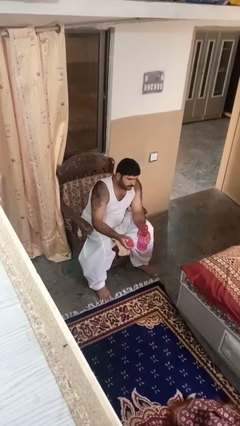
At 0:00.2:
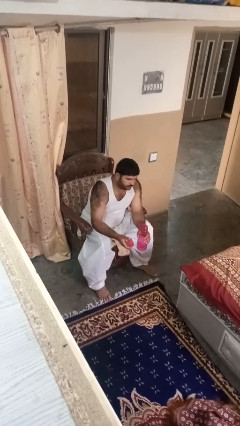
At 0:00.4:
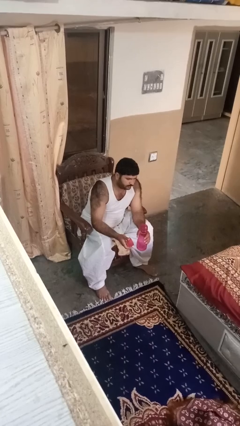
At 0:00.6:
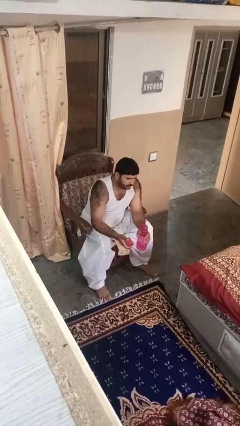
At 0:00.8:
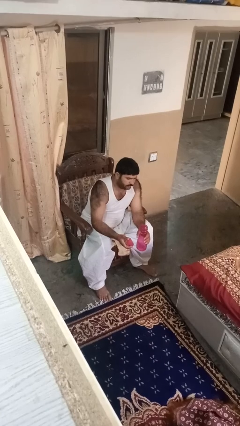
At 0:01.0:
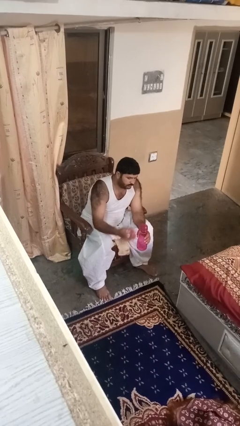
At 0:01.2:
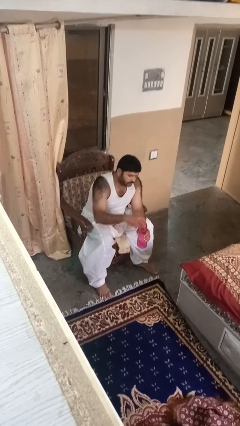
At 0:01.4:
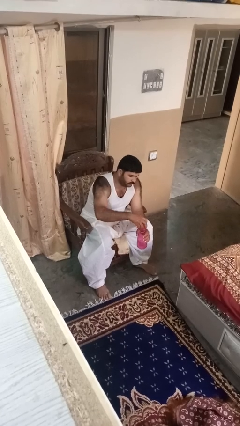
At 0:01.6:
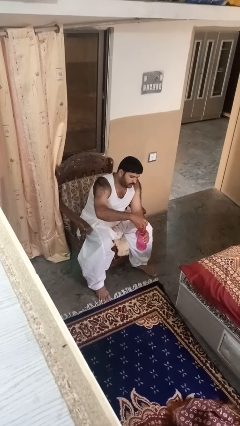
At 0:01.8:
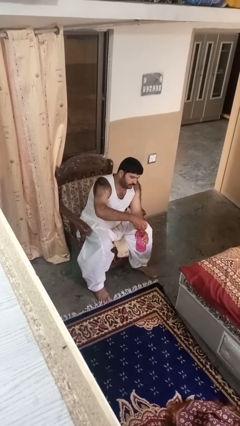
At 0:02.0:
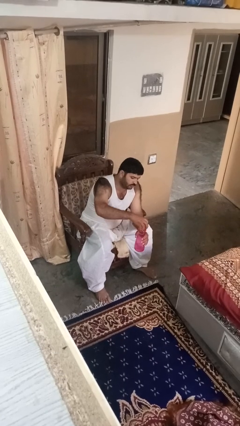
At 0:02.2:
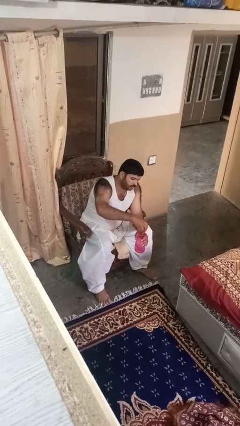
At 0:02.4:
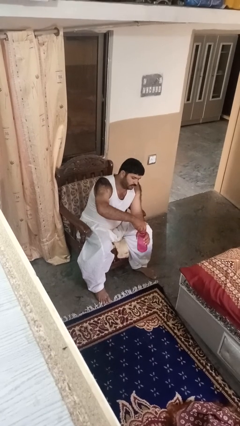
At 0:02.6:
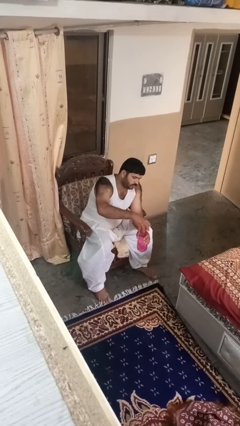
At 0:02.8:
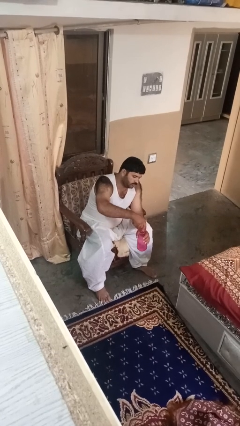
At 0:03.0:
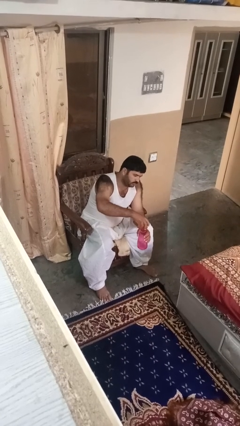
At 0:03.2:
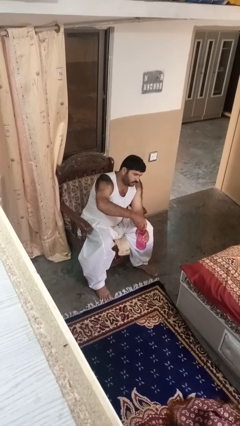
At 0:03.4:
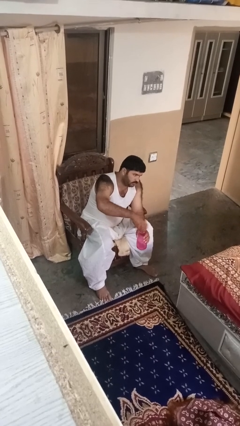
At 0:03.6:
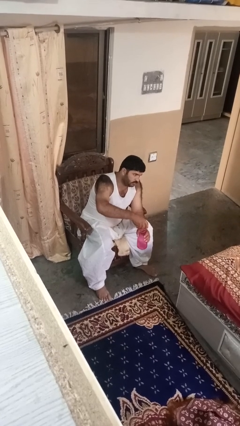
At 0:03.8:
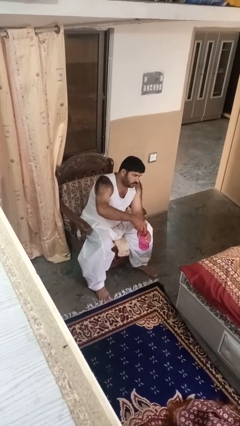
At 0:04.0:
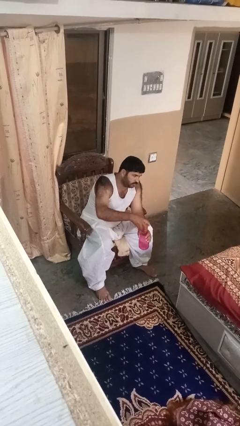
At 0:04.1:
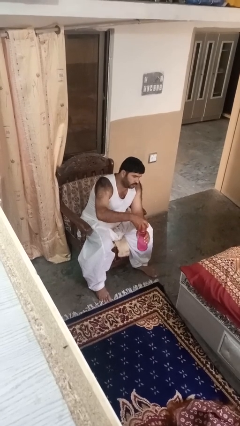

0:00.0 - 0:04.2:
person screws lid to bottle

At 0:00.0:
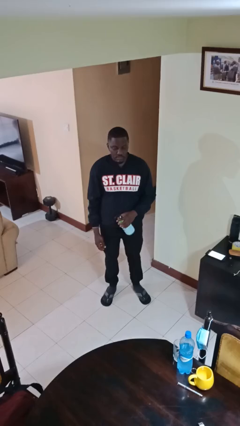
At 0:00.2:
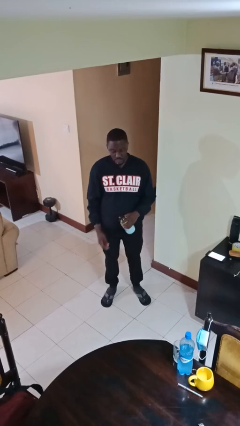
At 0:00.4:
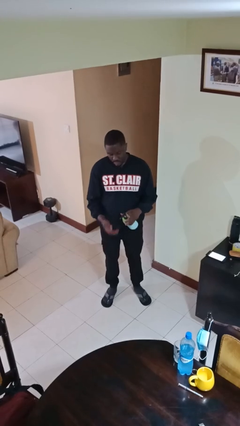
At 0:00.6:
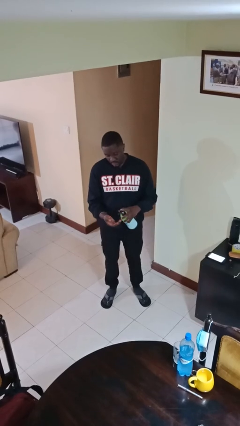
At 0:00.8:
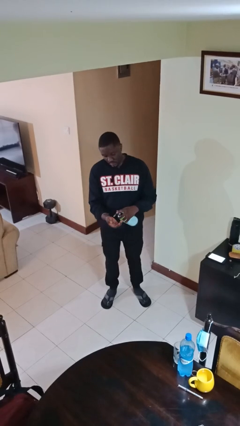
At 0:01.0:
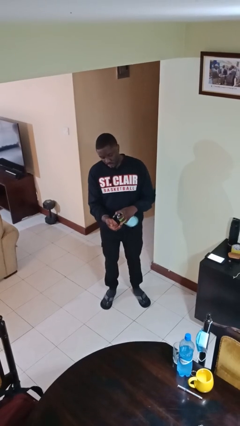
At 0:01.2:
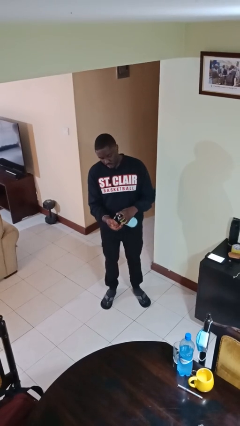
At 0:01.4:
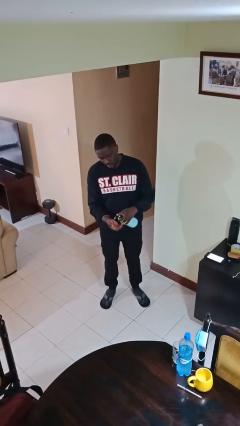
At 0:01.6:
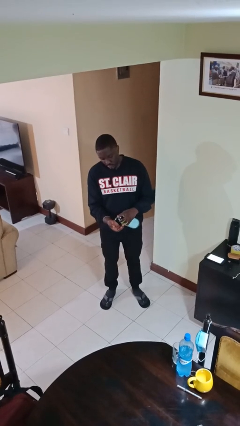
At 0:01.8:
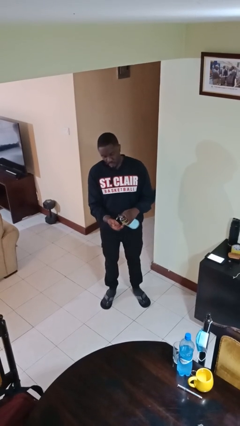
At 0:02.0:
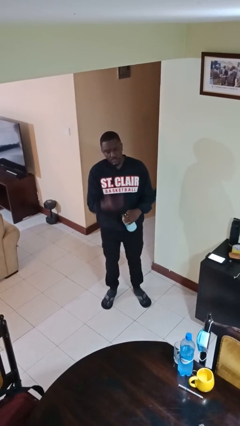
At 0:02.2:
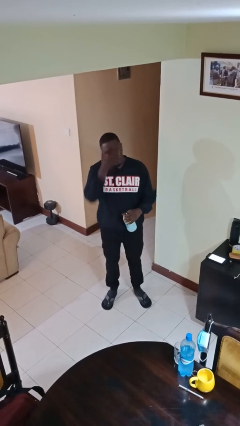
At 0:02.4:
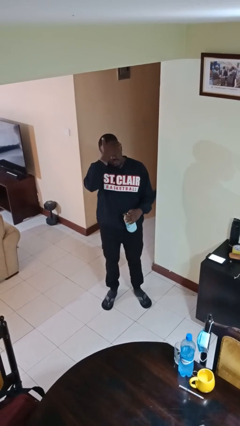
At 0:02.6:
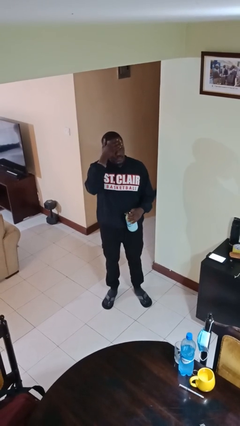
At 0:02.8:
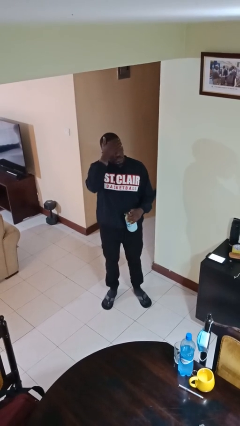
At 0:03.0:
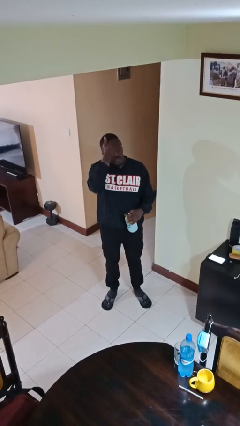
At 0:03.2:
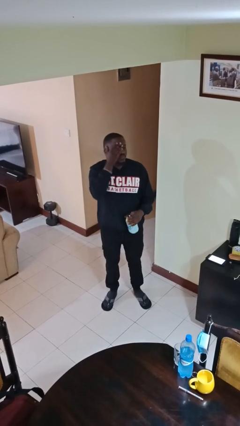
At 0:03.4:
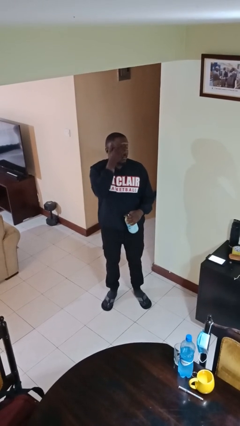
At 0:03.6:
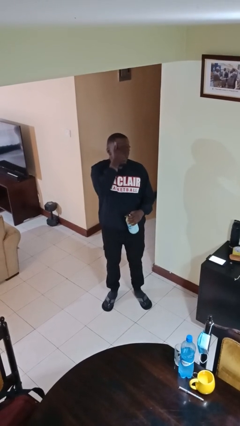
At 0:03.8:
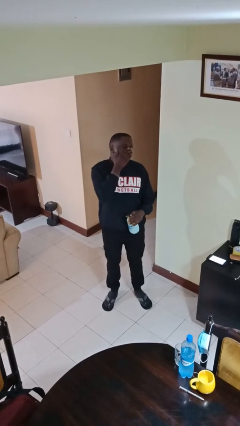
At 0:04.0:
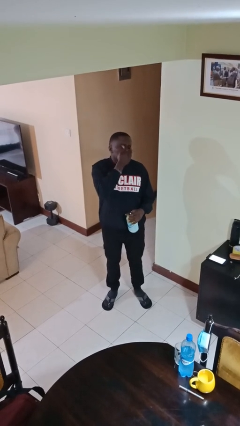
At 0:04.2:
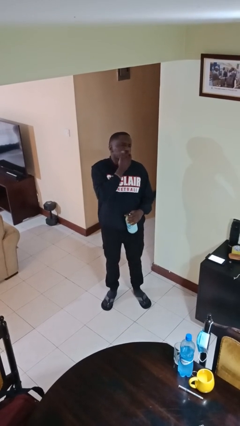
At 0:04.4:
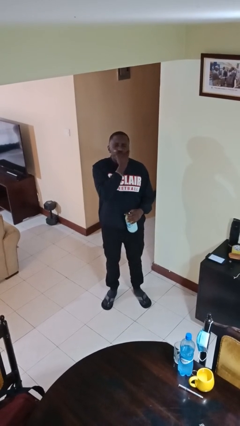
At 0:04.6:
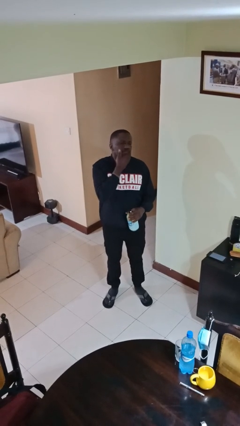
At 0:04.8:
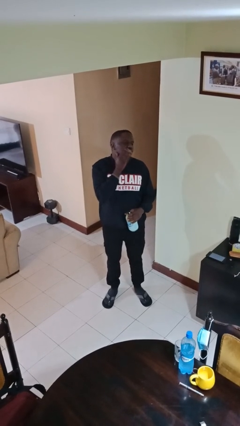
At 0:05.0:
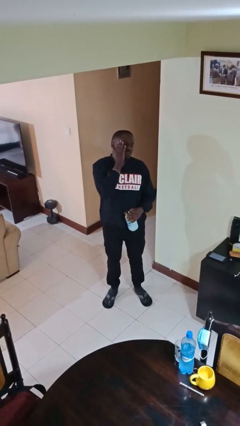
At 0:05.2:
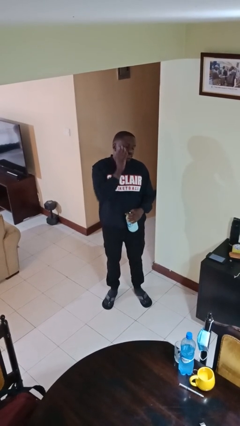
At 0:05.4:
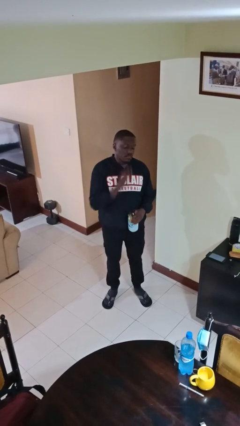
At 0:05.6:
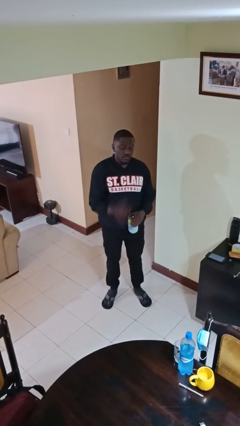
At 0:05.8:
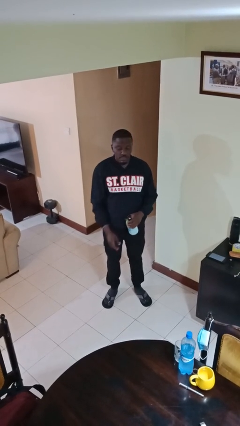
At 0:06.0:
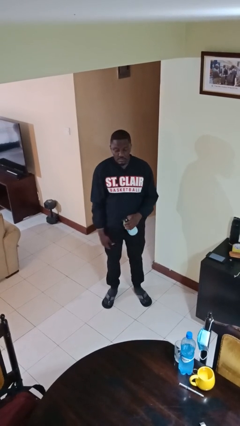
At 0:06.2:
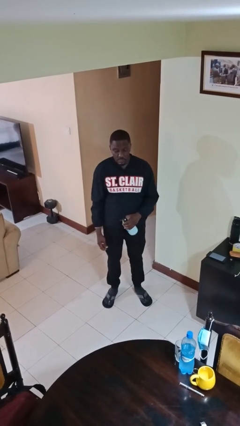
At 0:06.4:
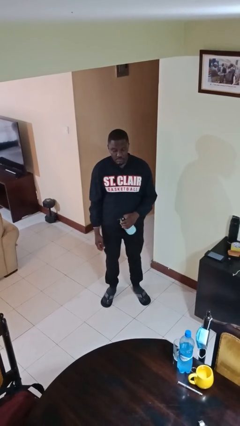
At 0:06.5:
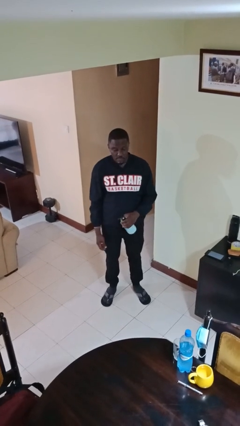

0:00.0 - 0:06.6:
person applies facial moisturizer

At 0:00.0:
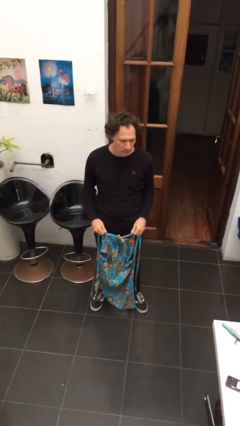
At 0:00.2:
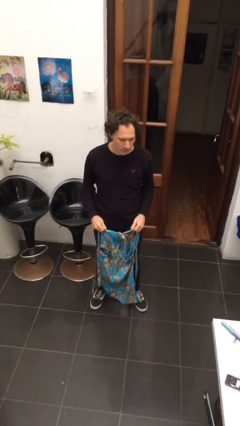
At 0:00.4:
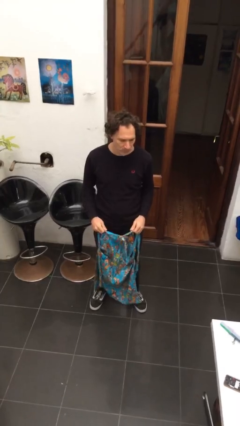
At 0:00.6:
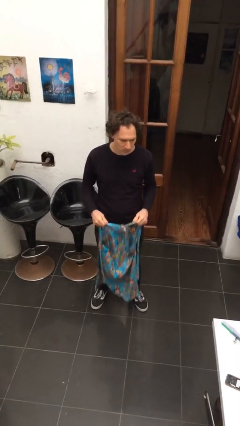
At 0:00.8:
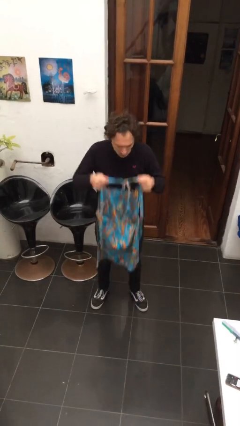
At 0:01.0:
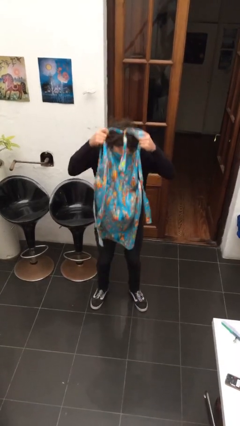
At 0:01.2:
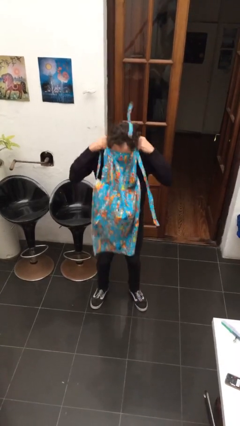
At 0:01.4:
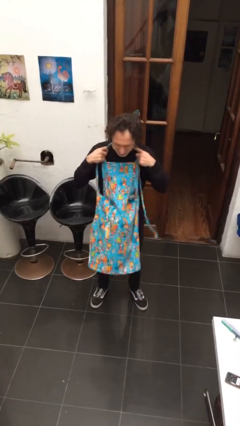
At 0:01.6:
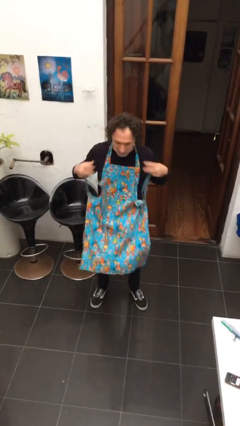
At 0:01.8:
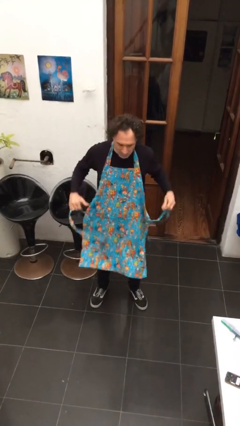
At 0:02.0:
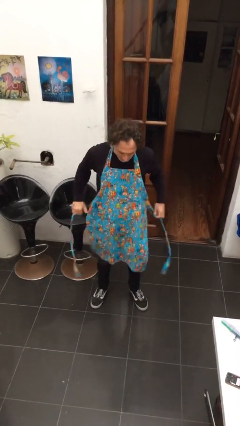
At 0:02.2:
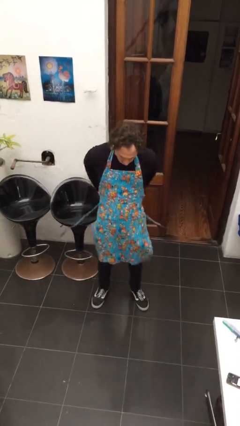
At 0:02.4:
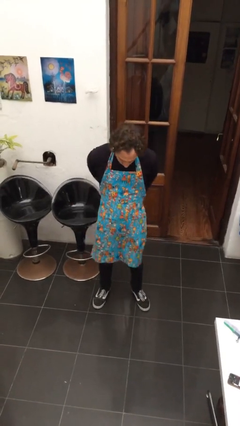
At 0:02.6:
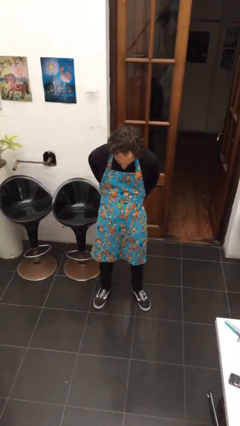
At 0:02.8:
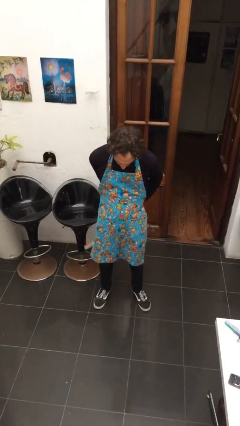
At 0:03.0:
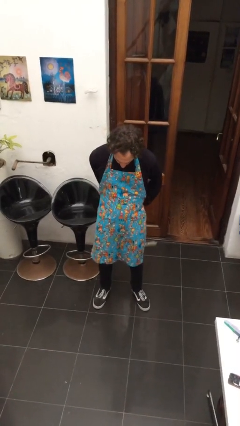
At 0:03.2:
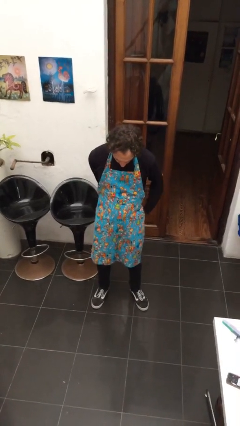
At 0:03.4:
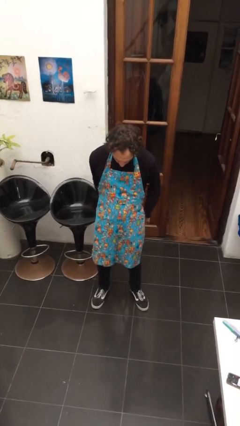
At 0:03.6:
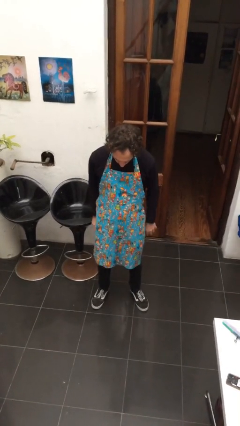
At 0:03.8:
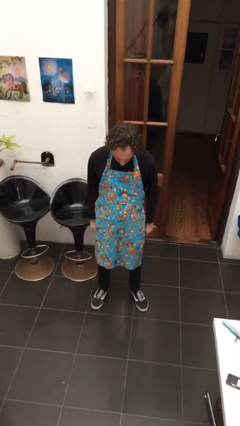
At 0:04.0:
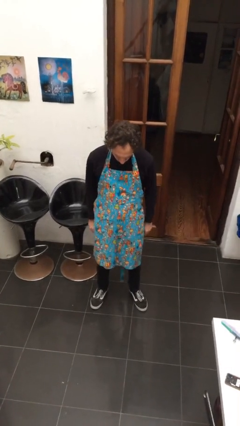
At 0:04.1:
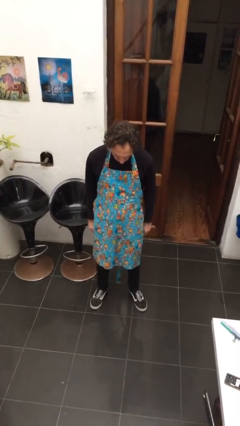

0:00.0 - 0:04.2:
person puts on apron

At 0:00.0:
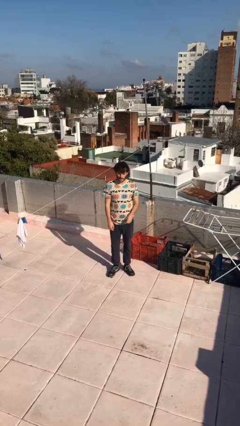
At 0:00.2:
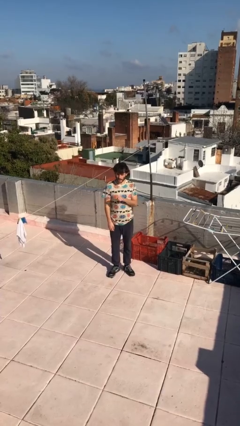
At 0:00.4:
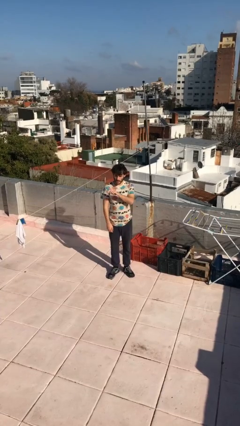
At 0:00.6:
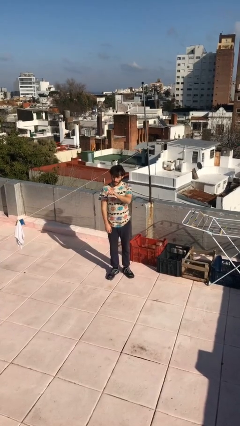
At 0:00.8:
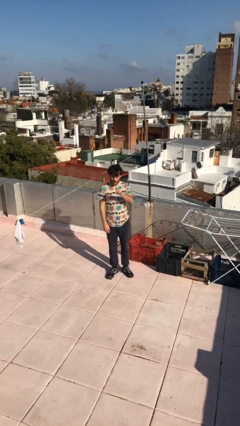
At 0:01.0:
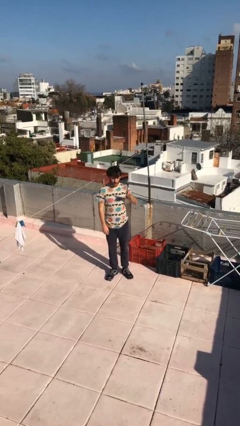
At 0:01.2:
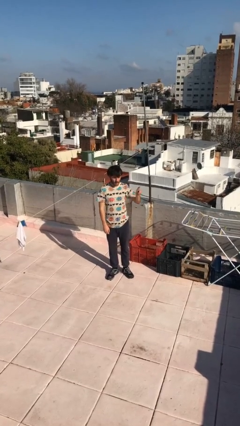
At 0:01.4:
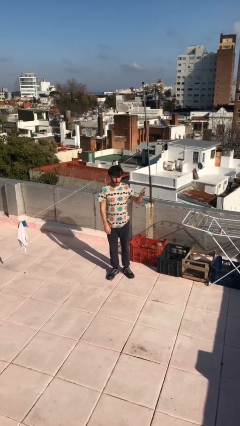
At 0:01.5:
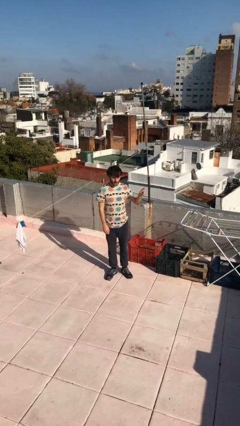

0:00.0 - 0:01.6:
person gestures swipe left

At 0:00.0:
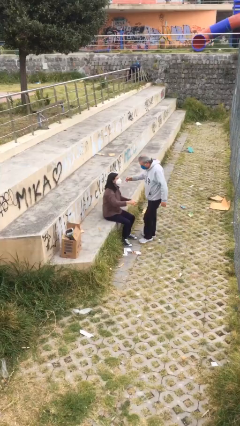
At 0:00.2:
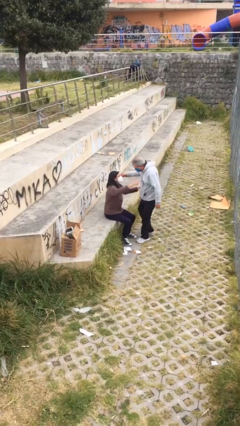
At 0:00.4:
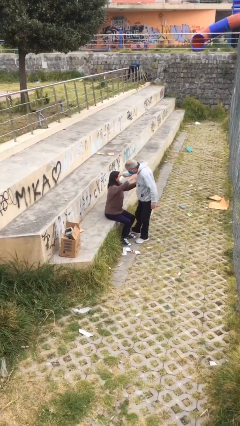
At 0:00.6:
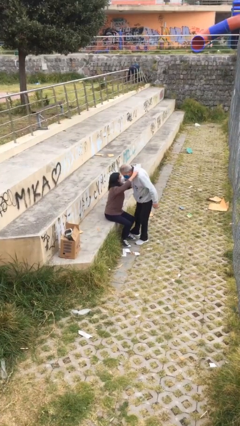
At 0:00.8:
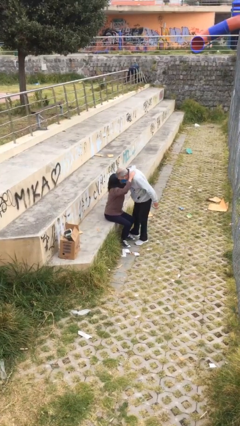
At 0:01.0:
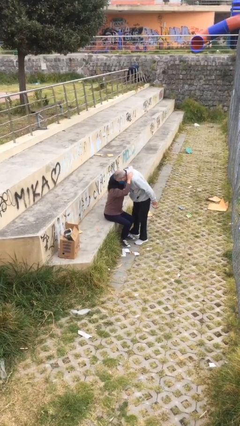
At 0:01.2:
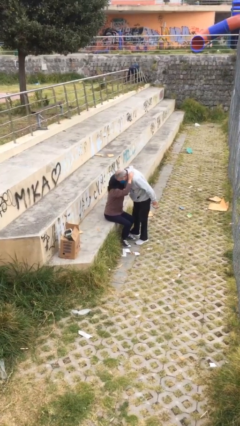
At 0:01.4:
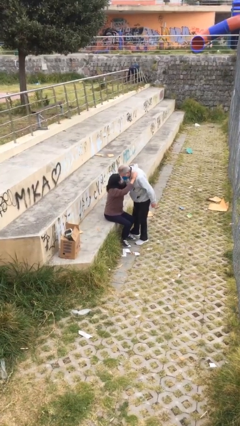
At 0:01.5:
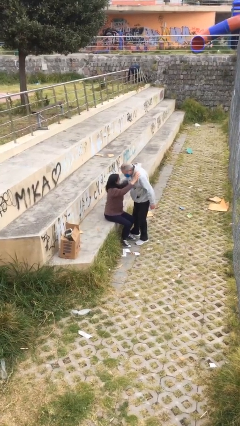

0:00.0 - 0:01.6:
person embraces person
